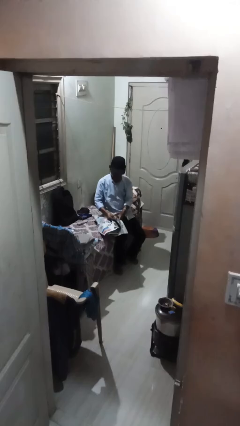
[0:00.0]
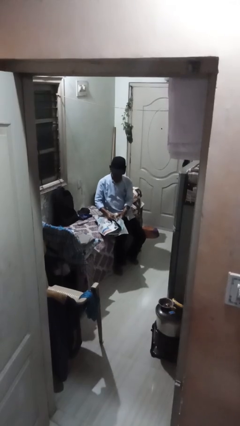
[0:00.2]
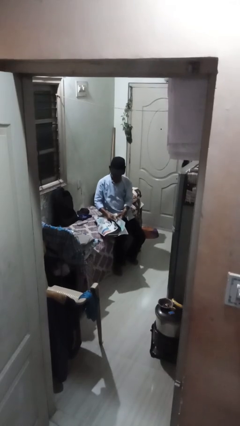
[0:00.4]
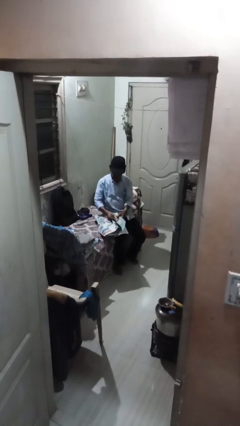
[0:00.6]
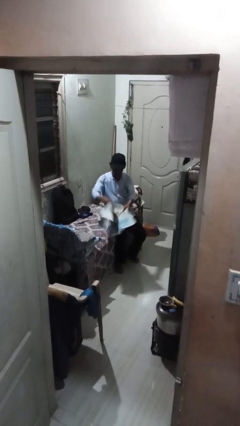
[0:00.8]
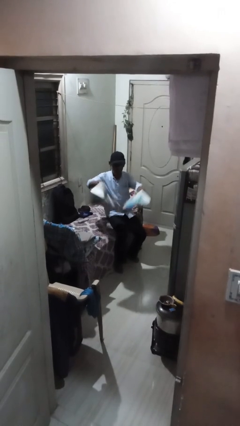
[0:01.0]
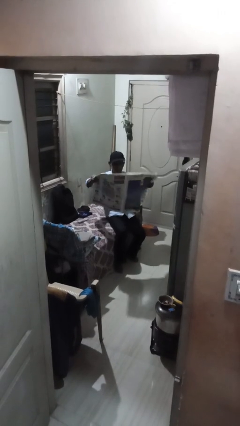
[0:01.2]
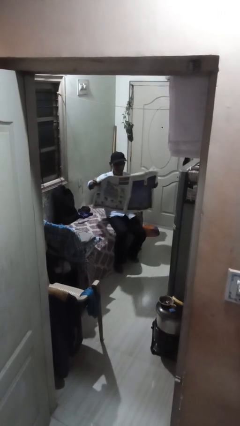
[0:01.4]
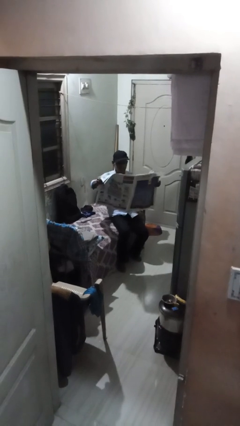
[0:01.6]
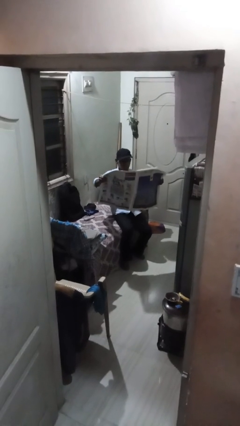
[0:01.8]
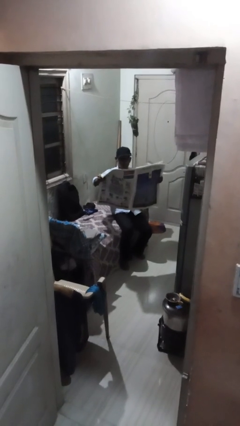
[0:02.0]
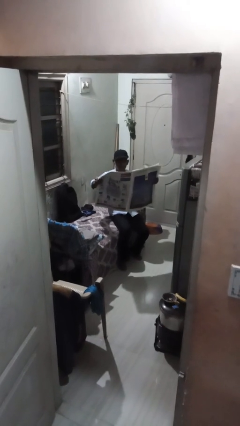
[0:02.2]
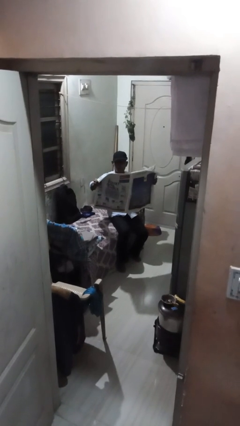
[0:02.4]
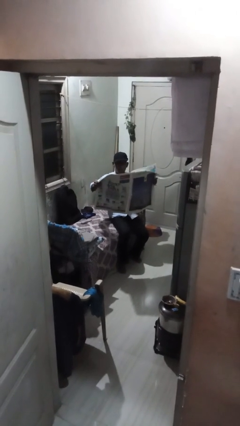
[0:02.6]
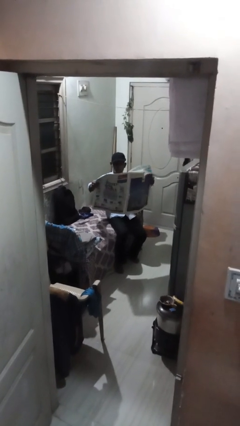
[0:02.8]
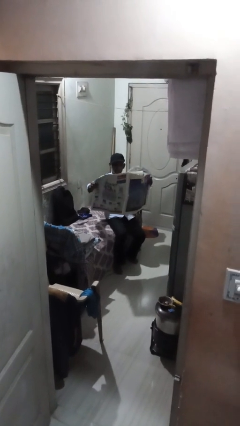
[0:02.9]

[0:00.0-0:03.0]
person reads newspaper

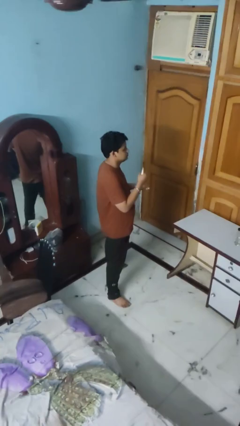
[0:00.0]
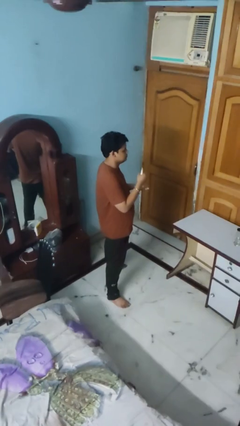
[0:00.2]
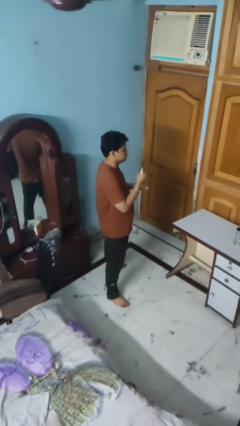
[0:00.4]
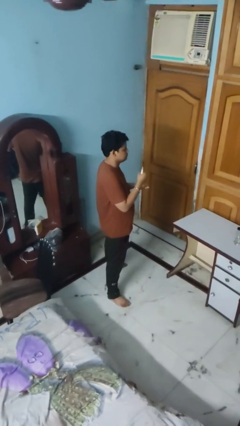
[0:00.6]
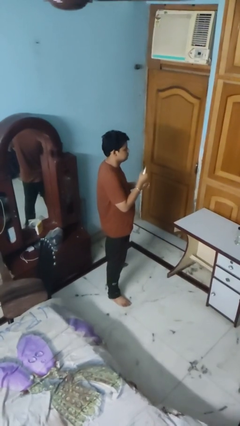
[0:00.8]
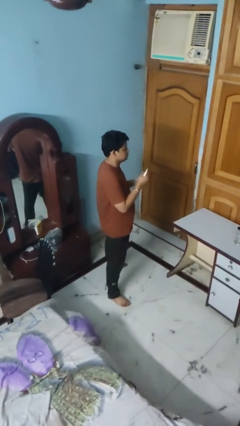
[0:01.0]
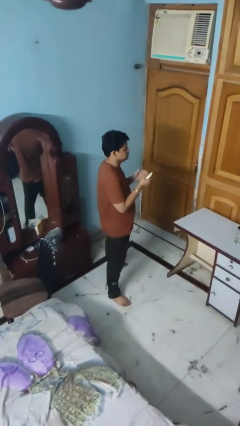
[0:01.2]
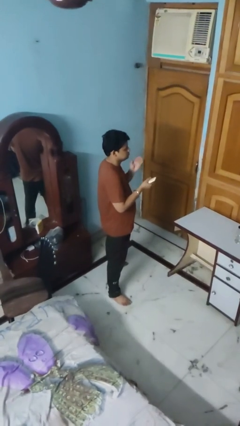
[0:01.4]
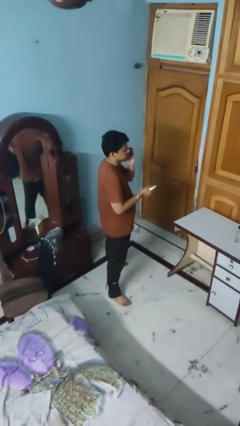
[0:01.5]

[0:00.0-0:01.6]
person applies facial moisturizer

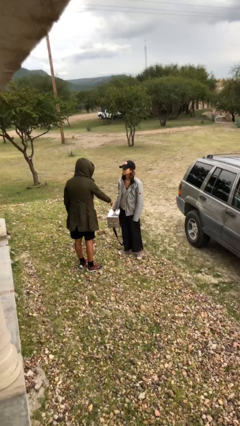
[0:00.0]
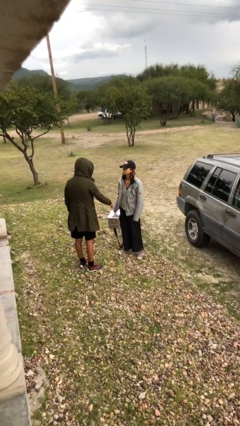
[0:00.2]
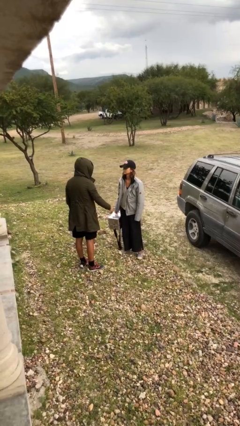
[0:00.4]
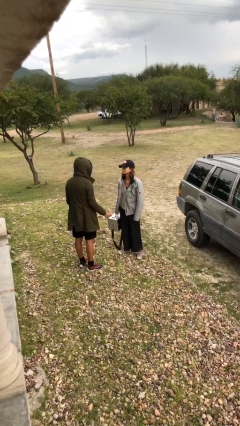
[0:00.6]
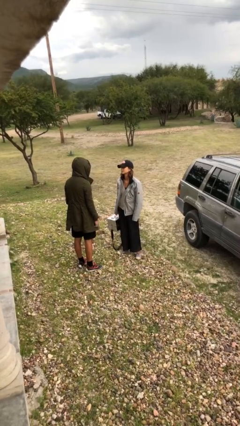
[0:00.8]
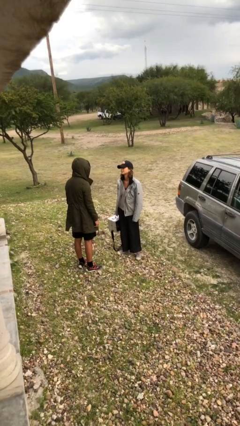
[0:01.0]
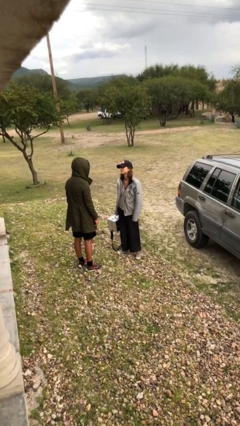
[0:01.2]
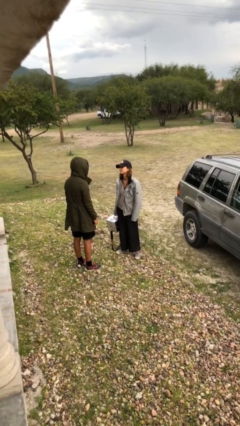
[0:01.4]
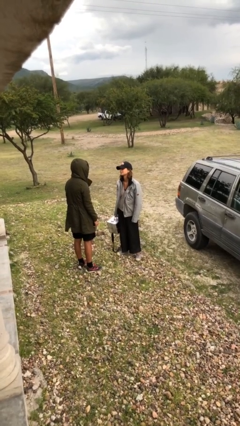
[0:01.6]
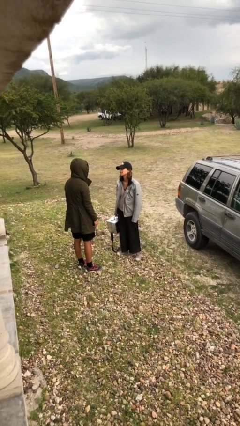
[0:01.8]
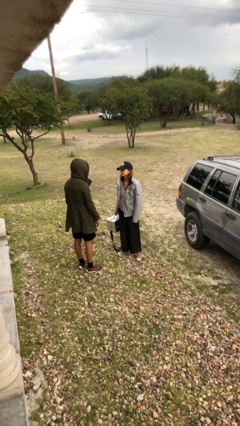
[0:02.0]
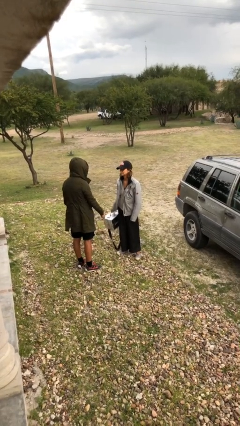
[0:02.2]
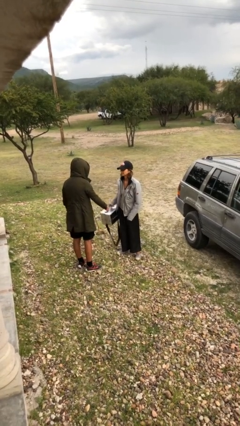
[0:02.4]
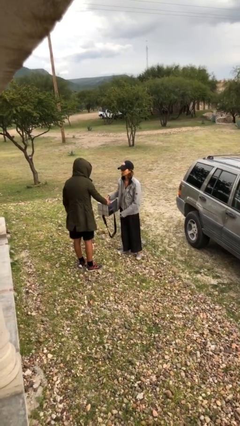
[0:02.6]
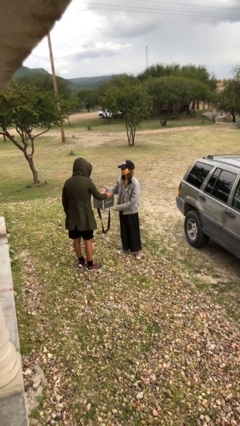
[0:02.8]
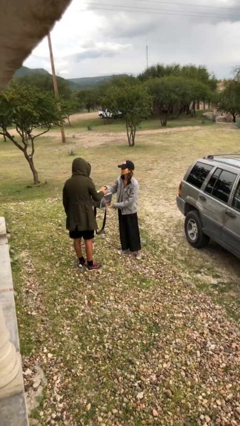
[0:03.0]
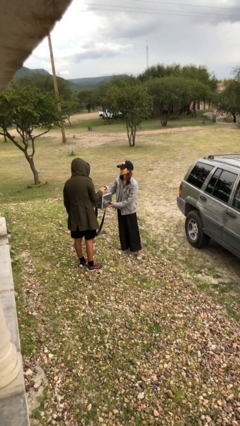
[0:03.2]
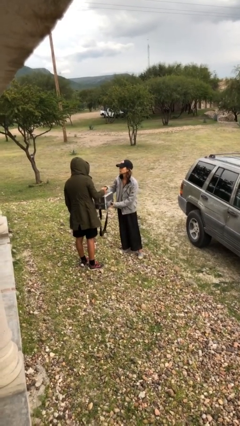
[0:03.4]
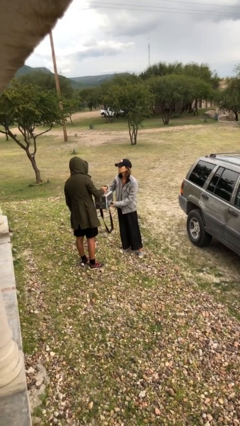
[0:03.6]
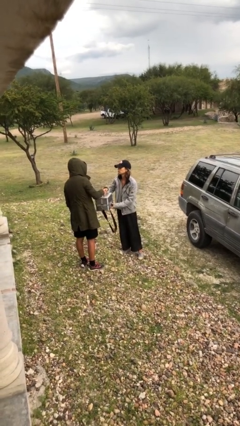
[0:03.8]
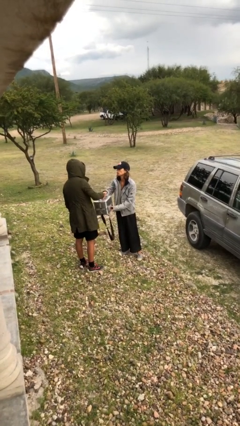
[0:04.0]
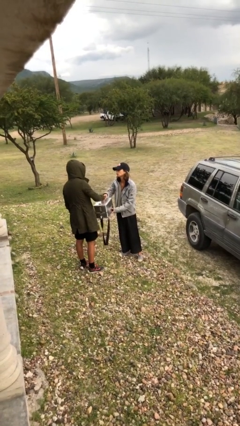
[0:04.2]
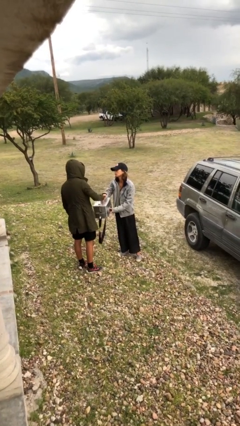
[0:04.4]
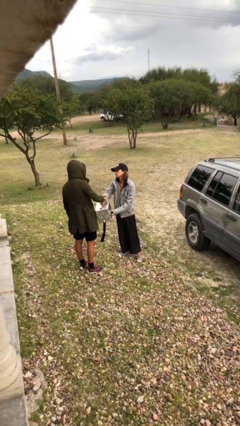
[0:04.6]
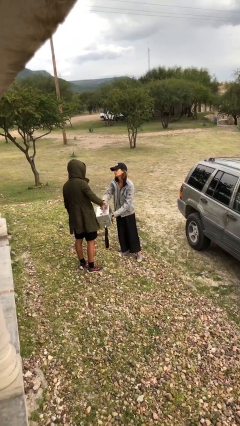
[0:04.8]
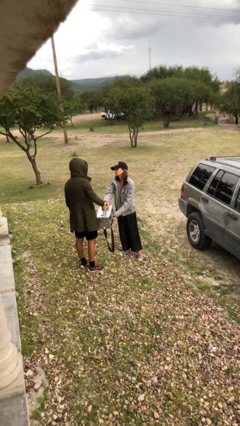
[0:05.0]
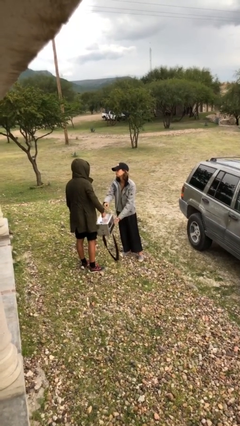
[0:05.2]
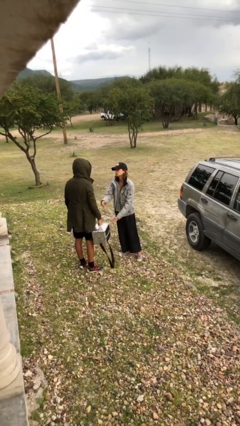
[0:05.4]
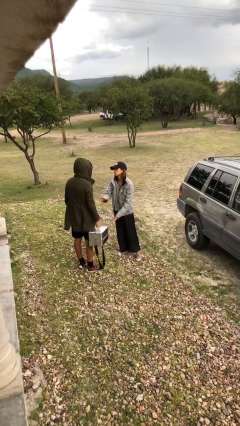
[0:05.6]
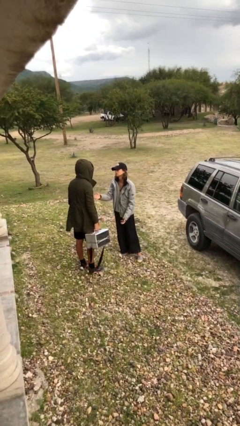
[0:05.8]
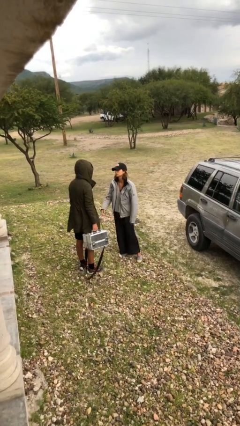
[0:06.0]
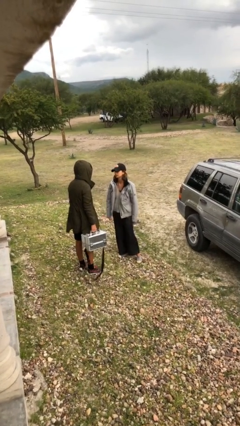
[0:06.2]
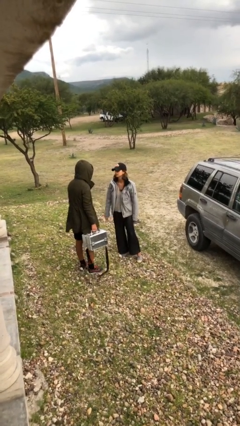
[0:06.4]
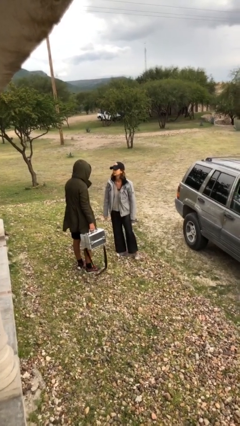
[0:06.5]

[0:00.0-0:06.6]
person transfers object to person

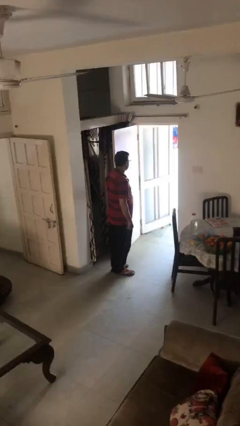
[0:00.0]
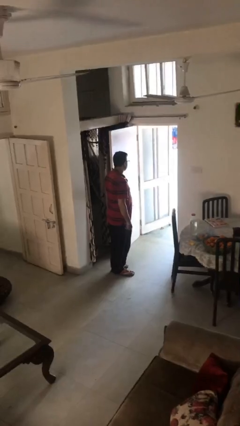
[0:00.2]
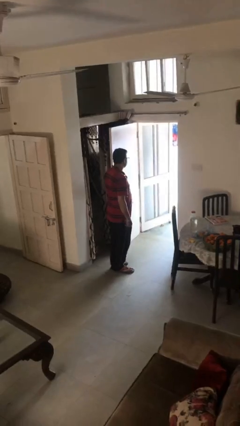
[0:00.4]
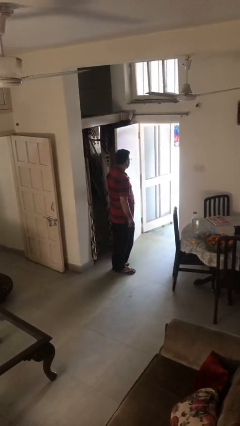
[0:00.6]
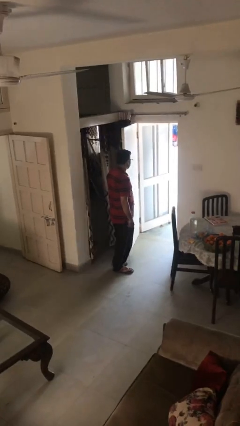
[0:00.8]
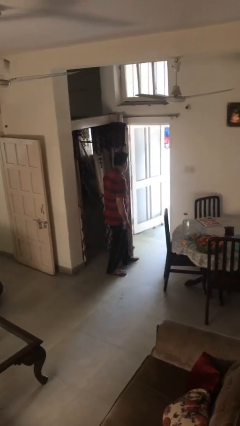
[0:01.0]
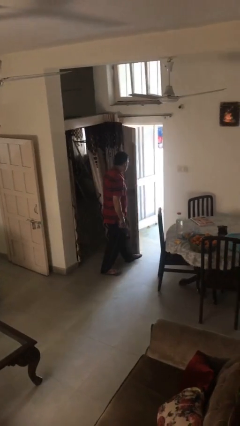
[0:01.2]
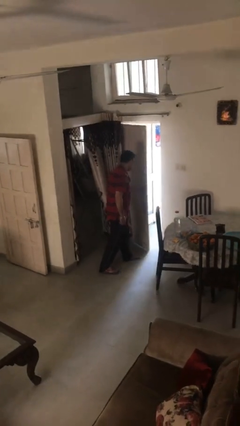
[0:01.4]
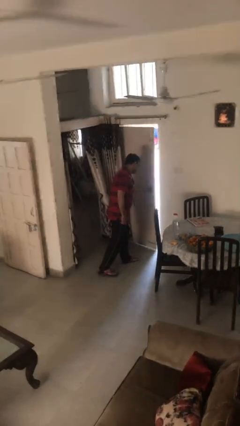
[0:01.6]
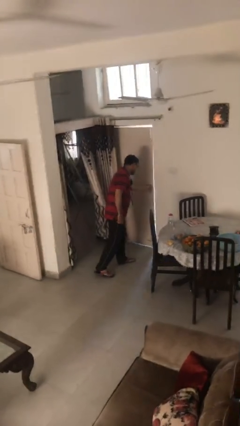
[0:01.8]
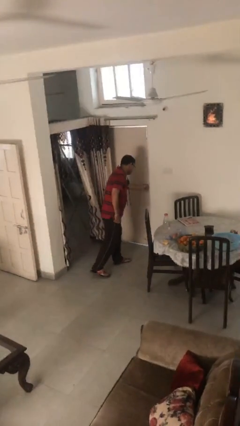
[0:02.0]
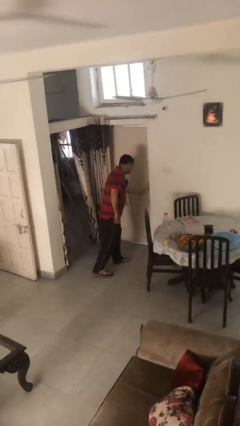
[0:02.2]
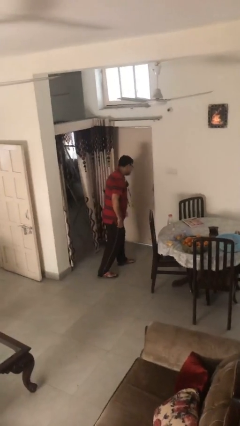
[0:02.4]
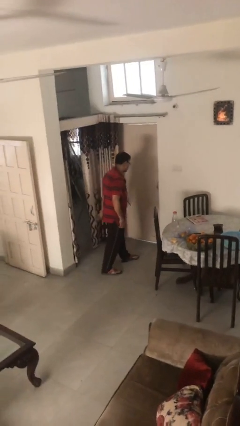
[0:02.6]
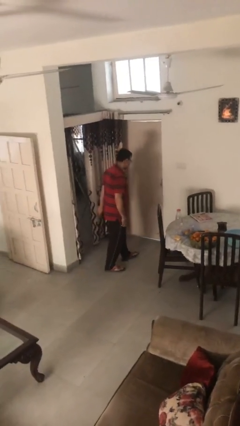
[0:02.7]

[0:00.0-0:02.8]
person closes facility door

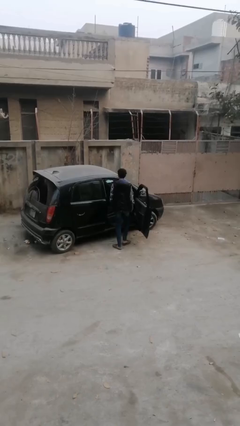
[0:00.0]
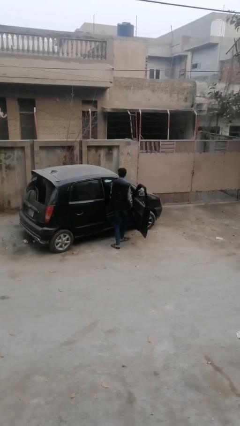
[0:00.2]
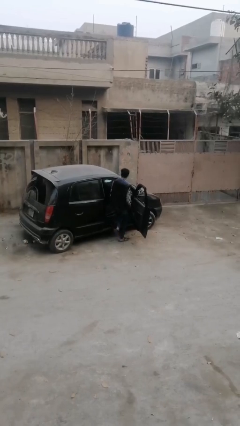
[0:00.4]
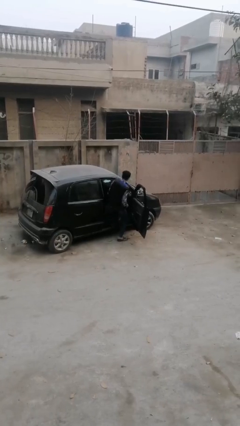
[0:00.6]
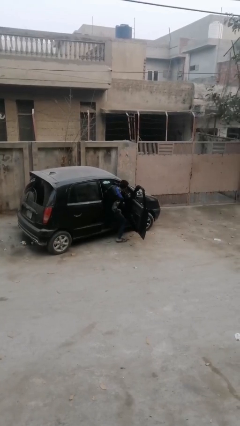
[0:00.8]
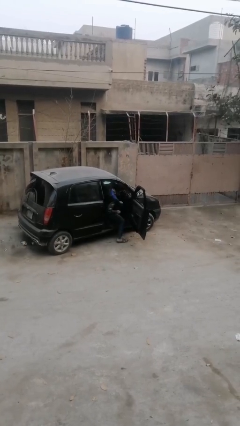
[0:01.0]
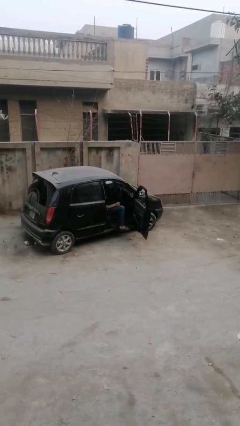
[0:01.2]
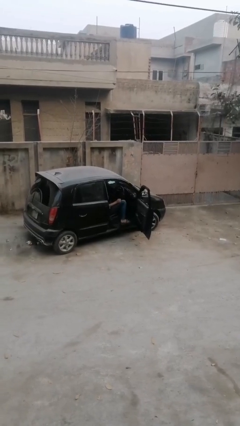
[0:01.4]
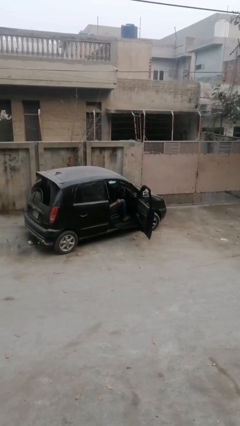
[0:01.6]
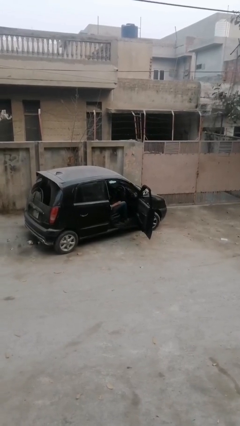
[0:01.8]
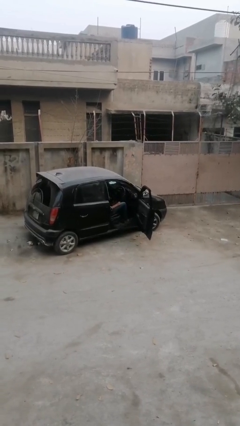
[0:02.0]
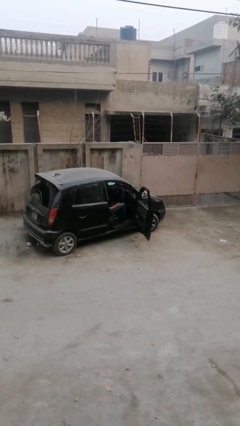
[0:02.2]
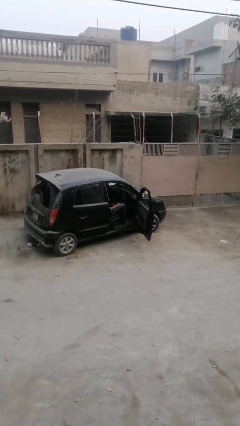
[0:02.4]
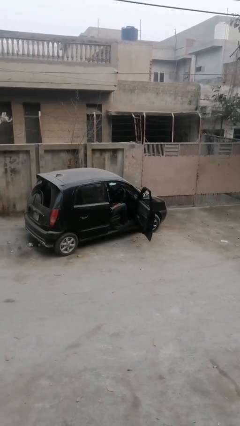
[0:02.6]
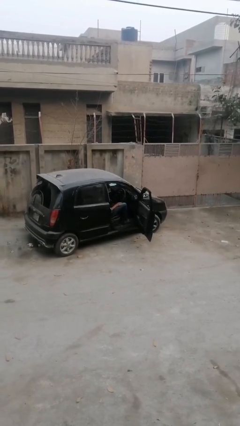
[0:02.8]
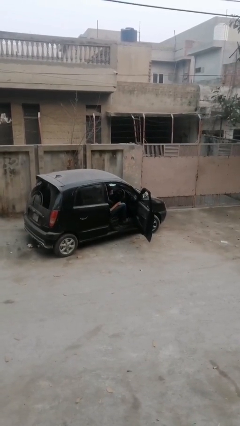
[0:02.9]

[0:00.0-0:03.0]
person enters car
